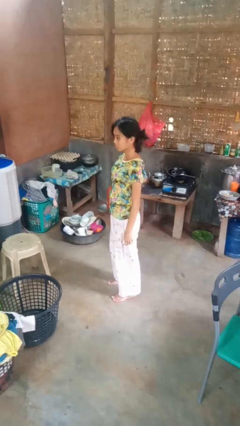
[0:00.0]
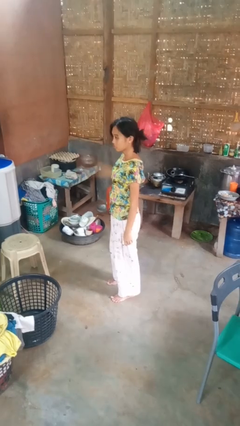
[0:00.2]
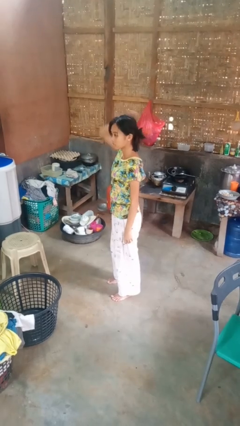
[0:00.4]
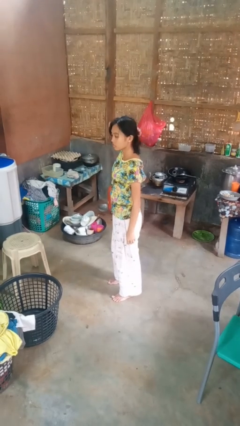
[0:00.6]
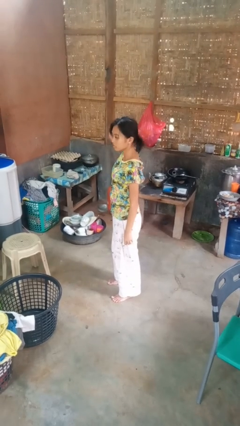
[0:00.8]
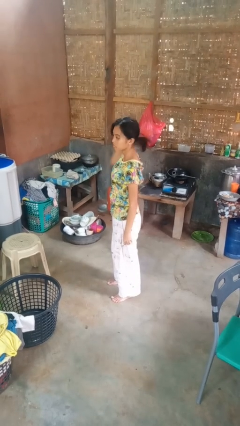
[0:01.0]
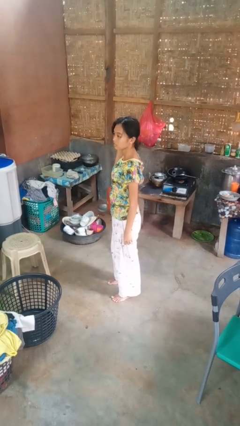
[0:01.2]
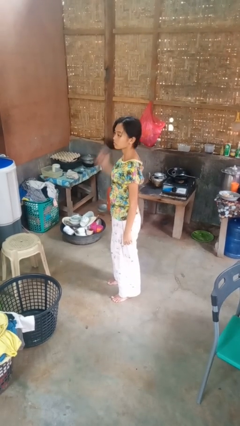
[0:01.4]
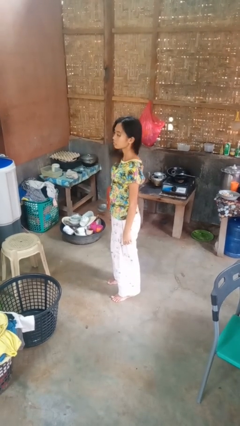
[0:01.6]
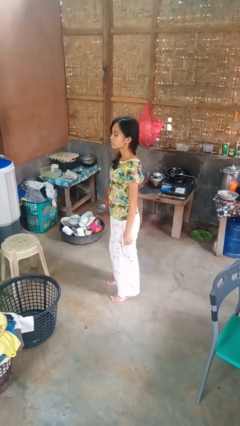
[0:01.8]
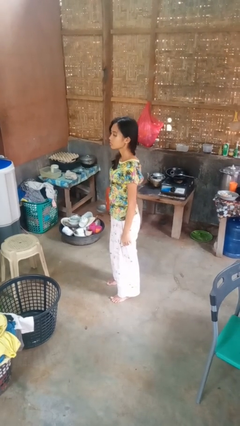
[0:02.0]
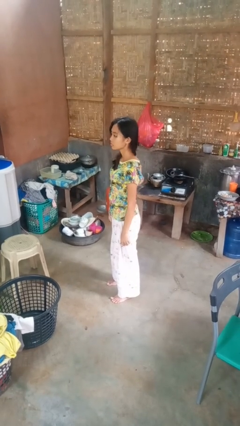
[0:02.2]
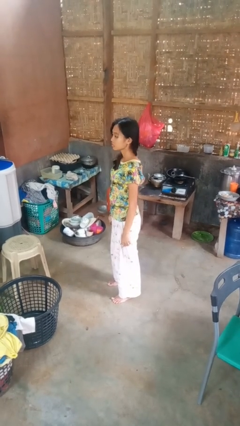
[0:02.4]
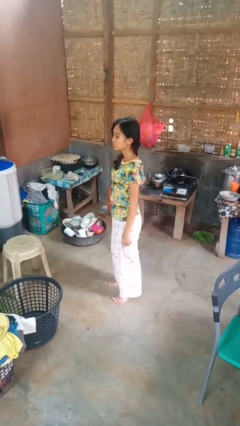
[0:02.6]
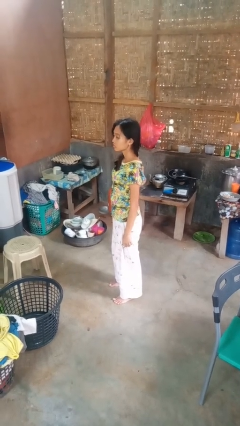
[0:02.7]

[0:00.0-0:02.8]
person takes off hairtie

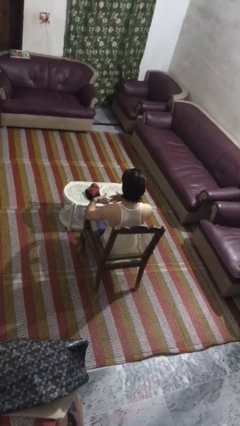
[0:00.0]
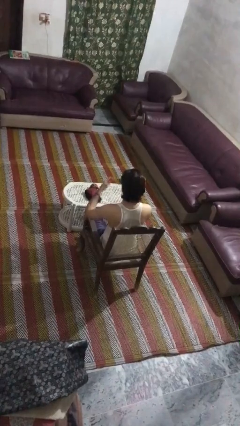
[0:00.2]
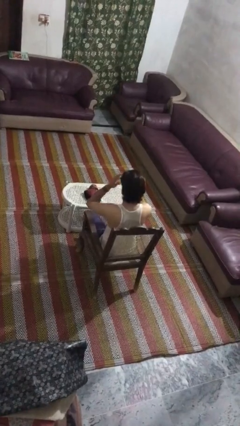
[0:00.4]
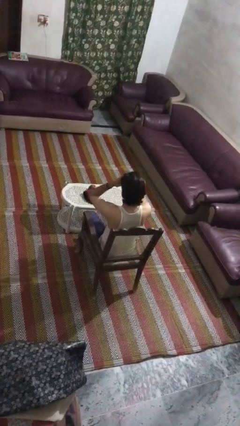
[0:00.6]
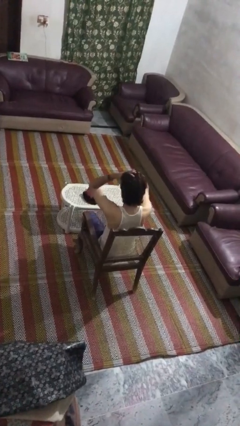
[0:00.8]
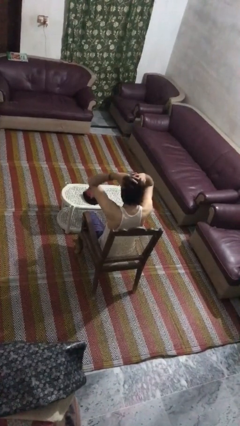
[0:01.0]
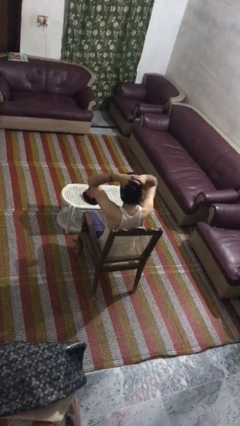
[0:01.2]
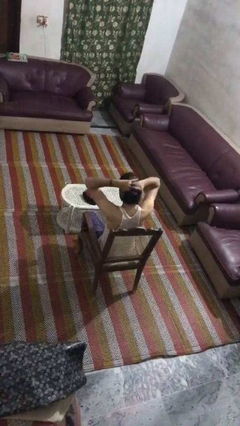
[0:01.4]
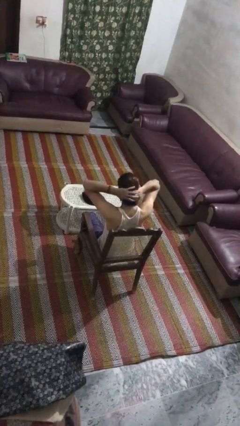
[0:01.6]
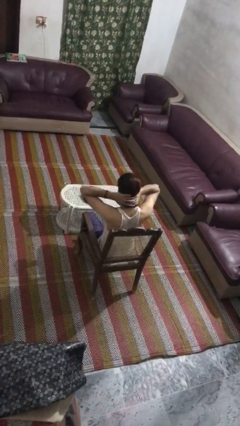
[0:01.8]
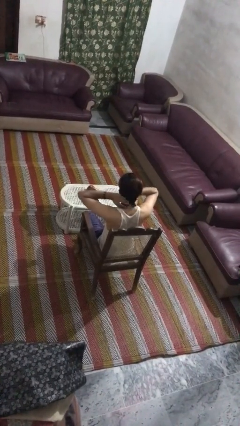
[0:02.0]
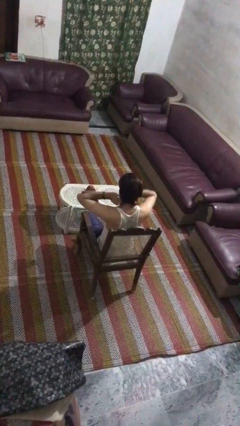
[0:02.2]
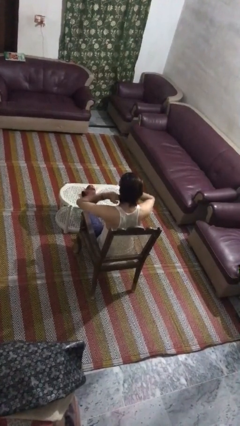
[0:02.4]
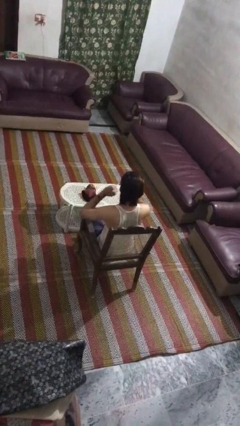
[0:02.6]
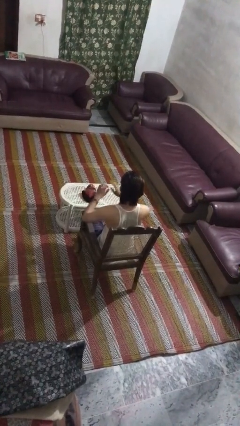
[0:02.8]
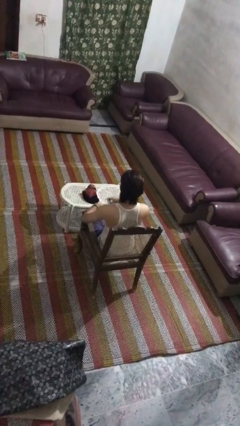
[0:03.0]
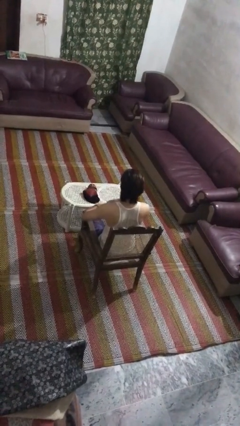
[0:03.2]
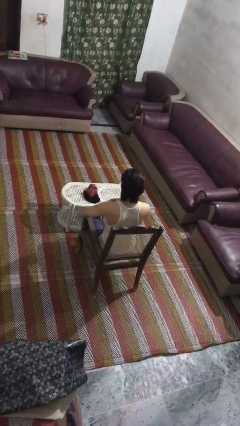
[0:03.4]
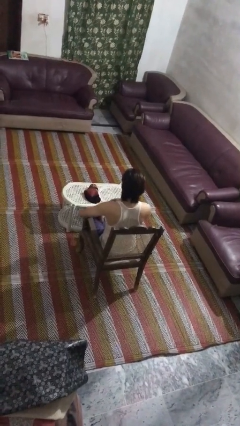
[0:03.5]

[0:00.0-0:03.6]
person strokes hair

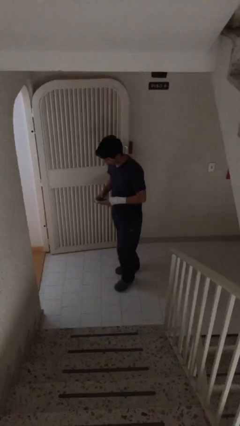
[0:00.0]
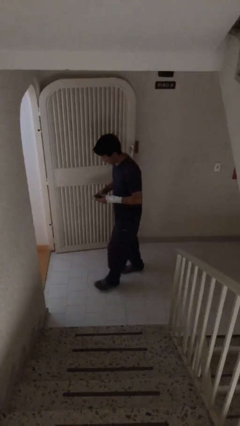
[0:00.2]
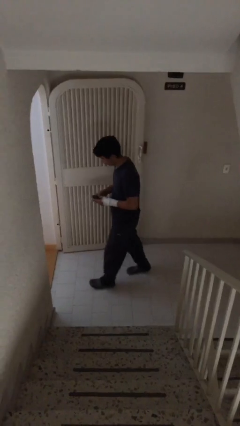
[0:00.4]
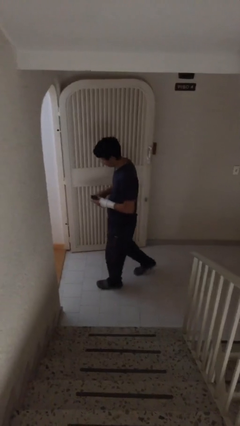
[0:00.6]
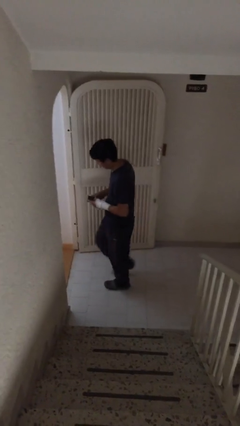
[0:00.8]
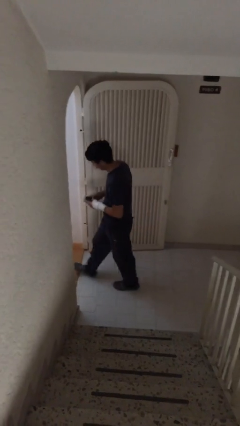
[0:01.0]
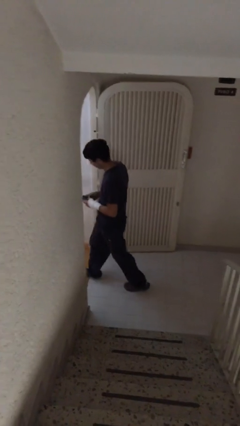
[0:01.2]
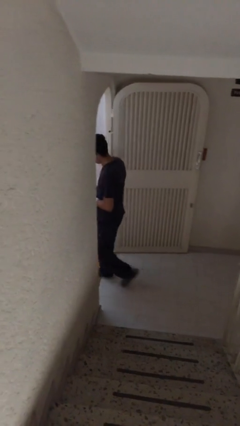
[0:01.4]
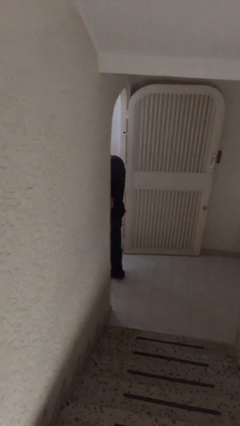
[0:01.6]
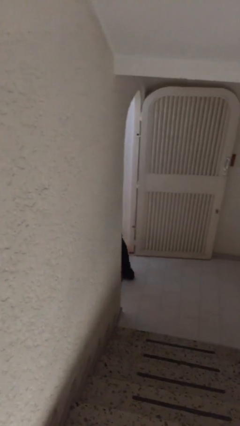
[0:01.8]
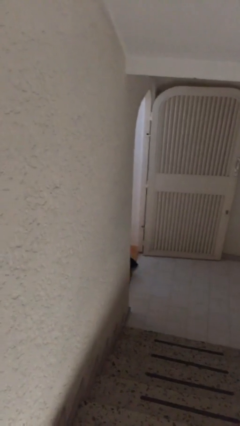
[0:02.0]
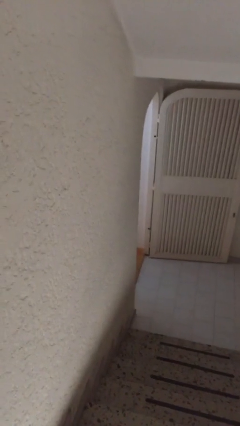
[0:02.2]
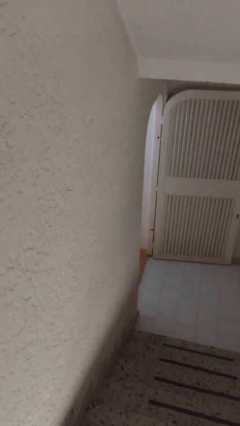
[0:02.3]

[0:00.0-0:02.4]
person exits scene through structure

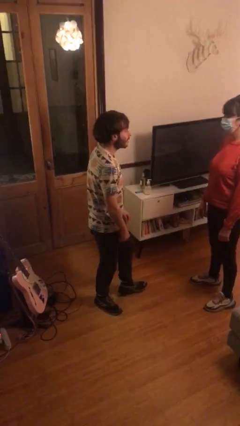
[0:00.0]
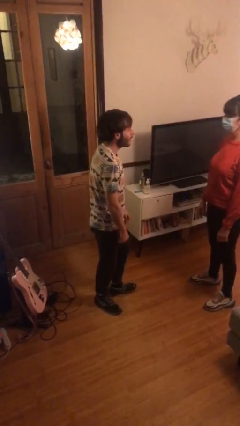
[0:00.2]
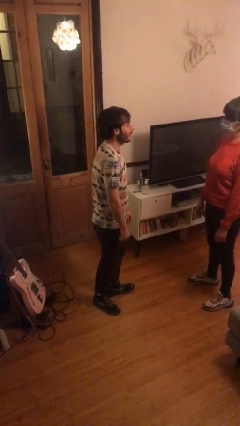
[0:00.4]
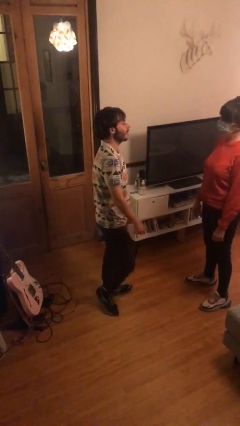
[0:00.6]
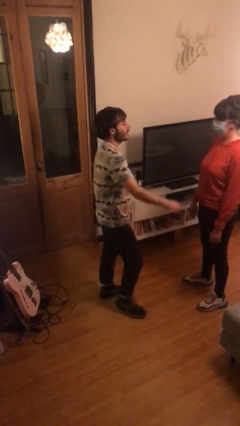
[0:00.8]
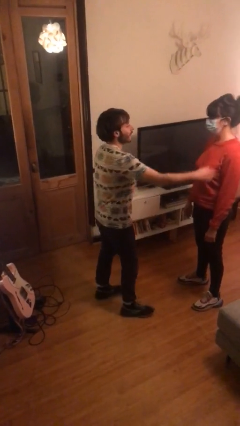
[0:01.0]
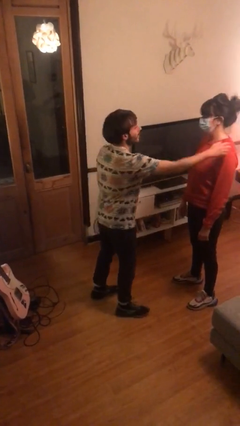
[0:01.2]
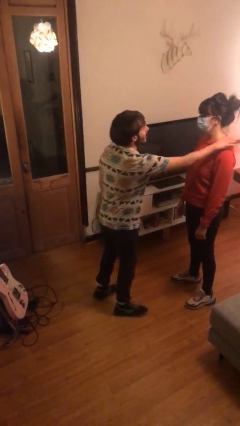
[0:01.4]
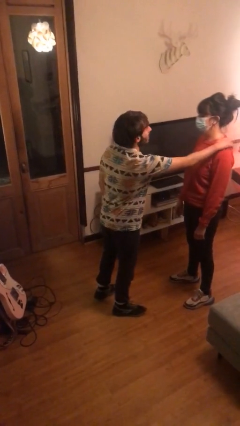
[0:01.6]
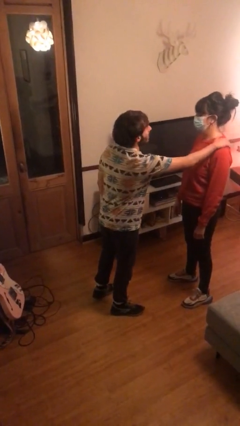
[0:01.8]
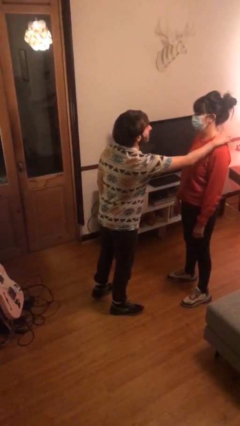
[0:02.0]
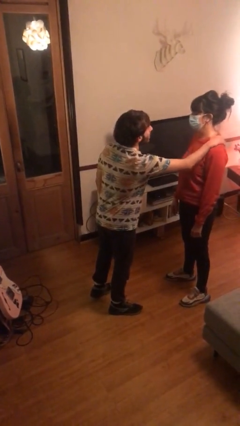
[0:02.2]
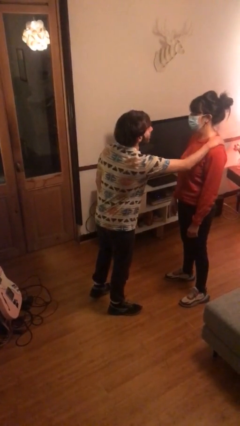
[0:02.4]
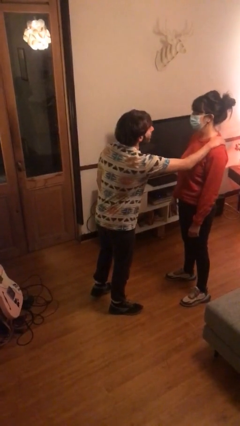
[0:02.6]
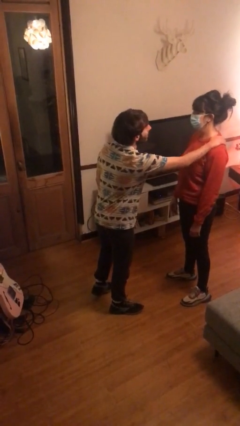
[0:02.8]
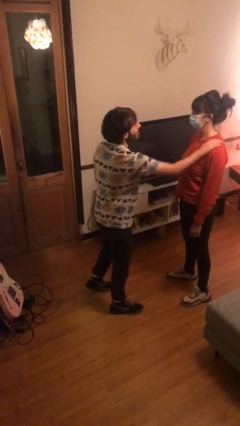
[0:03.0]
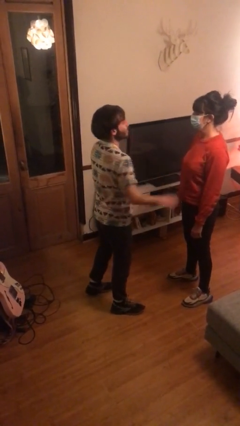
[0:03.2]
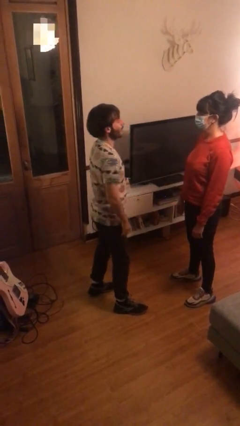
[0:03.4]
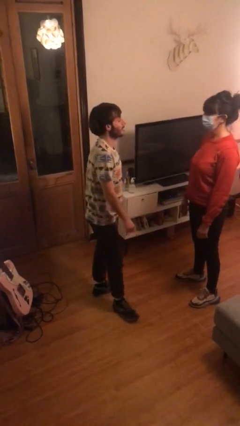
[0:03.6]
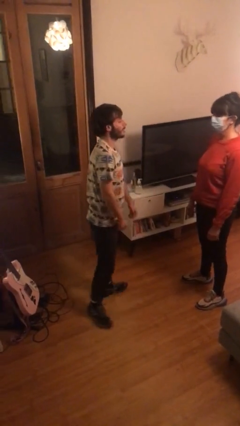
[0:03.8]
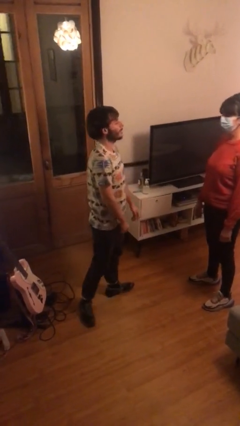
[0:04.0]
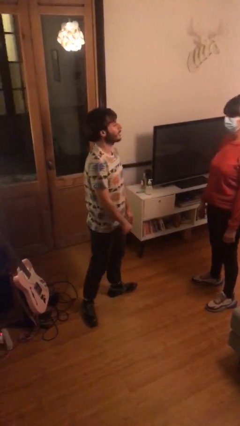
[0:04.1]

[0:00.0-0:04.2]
person pounds shoulders of person

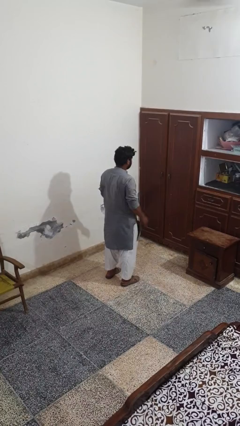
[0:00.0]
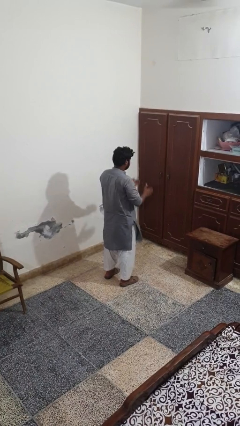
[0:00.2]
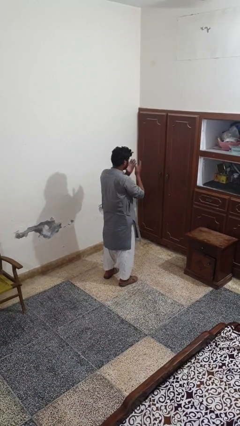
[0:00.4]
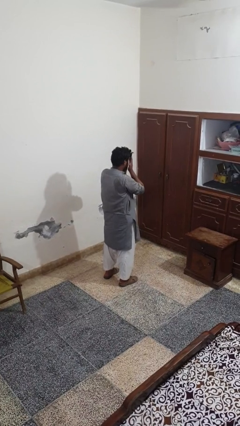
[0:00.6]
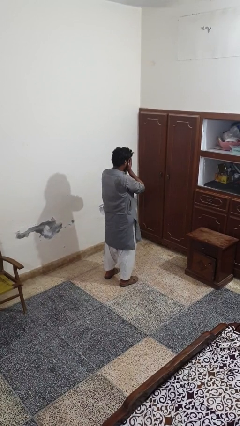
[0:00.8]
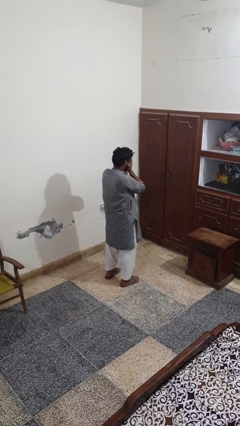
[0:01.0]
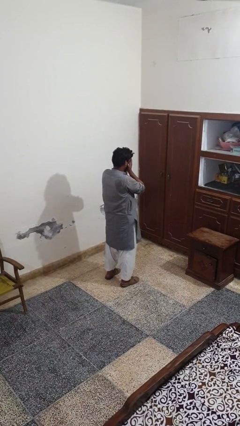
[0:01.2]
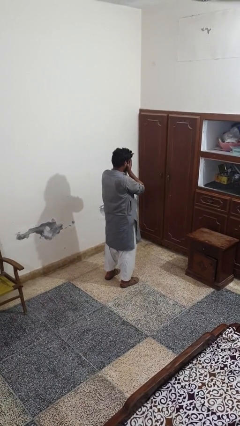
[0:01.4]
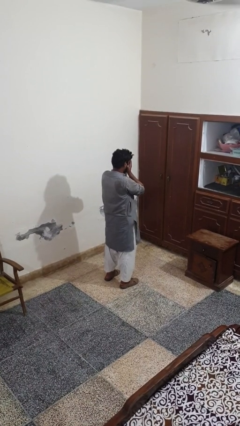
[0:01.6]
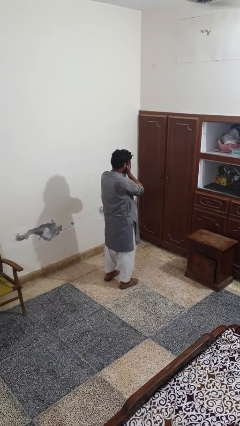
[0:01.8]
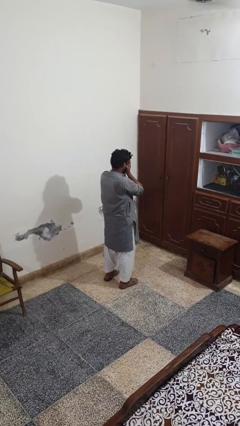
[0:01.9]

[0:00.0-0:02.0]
person covers face with hands

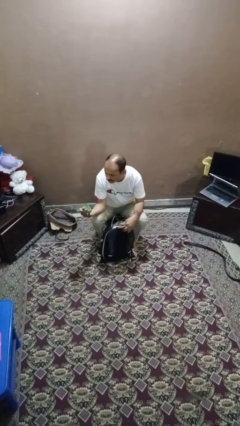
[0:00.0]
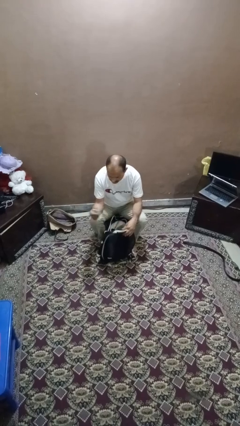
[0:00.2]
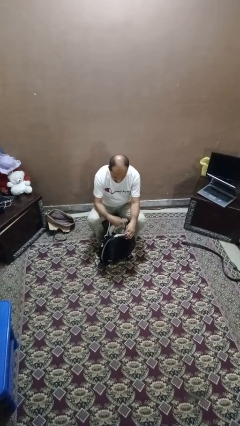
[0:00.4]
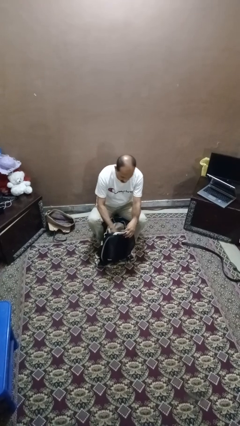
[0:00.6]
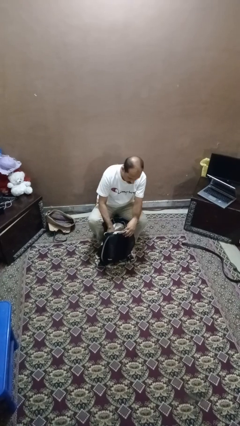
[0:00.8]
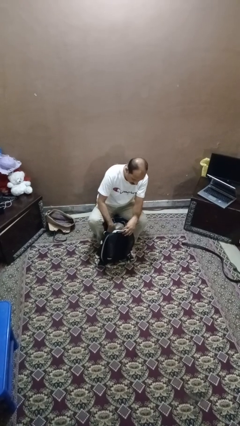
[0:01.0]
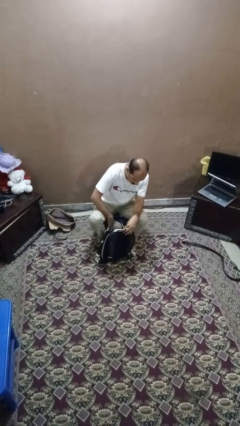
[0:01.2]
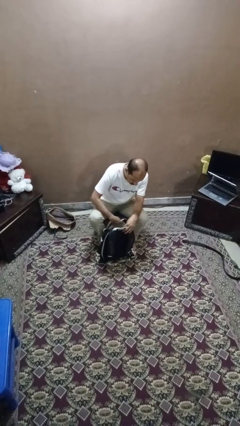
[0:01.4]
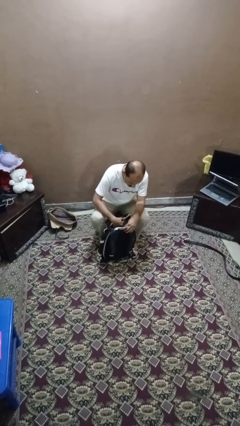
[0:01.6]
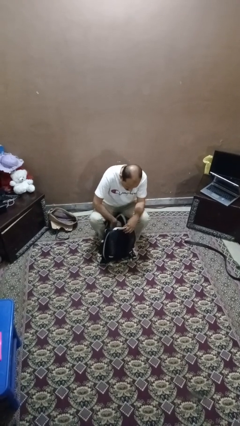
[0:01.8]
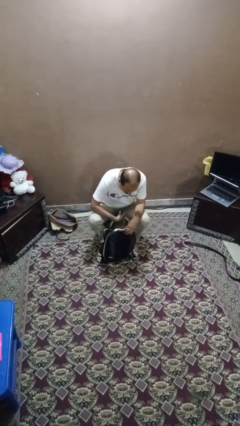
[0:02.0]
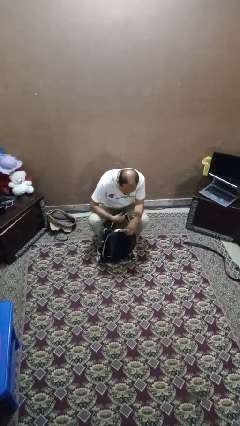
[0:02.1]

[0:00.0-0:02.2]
person puts object into backpack

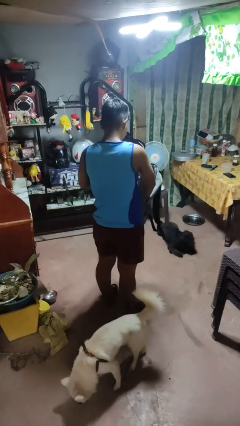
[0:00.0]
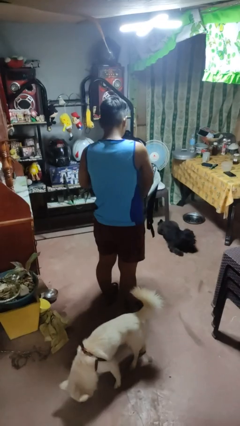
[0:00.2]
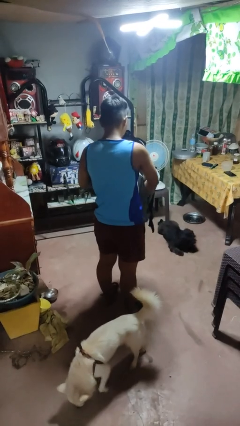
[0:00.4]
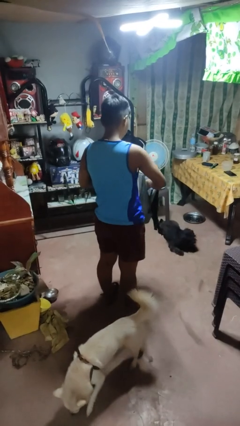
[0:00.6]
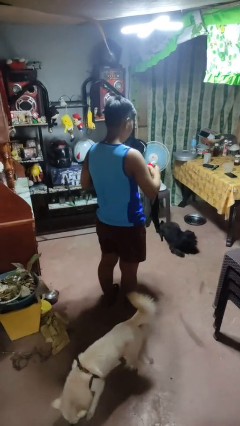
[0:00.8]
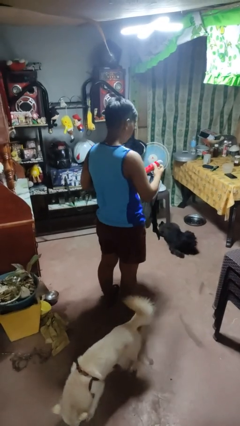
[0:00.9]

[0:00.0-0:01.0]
person takes object from bag
